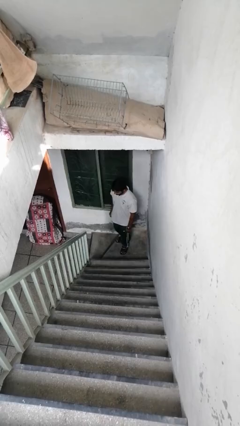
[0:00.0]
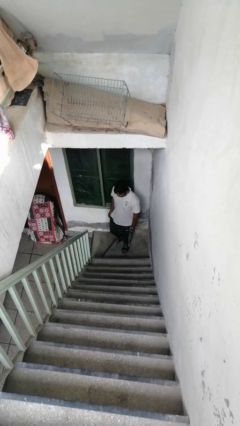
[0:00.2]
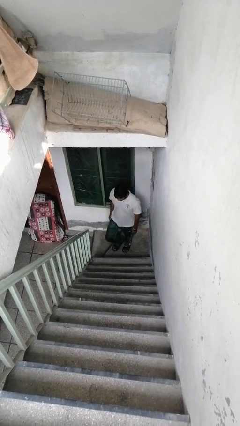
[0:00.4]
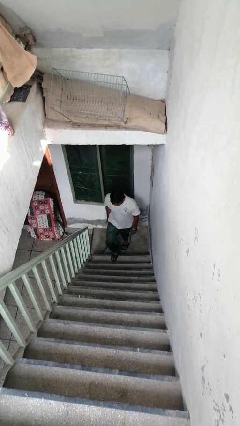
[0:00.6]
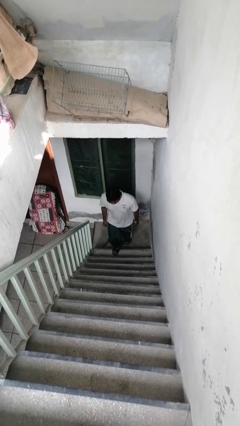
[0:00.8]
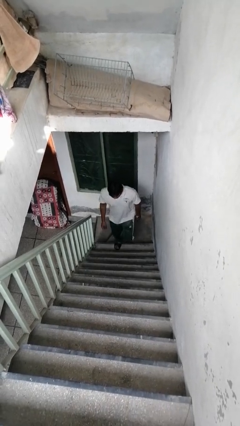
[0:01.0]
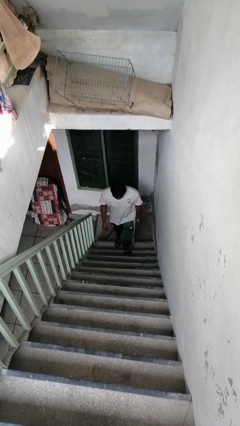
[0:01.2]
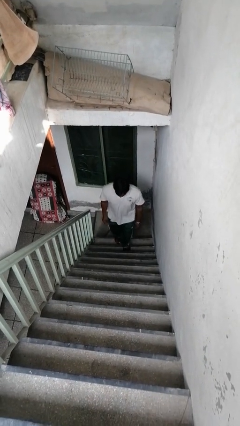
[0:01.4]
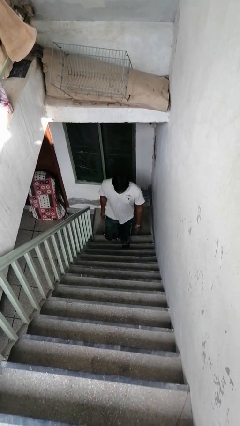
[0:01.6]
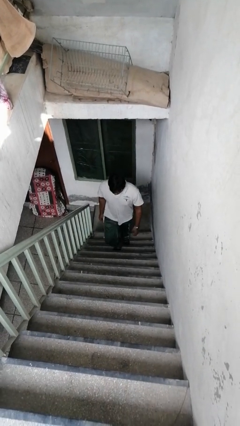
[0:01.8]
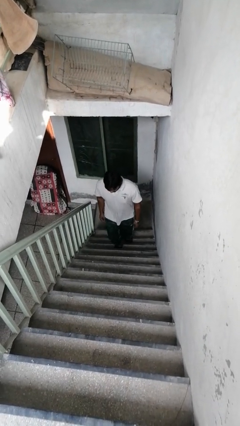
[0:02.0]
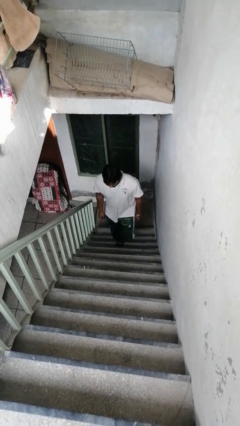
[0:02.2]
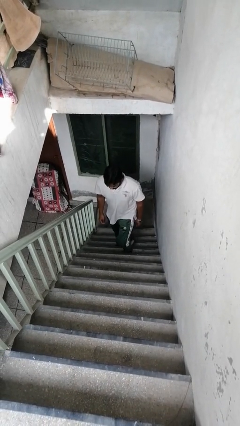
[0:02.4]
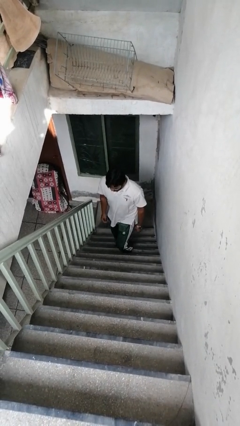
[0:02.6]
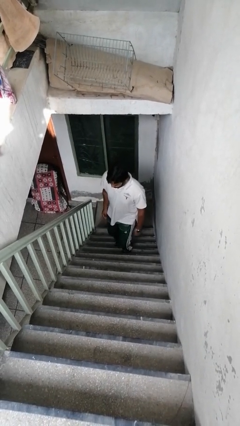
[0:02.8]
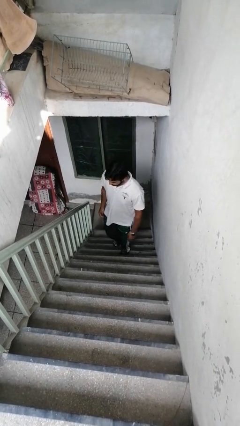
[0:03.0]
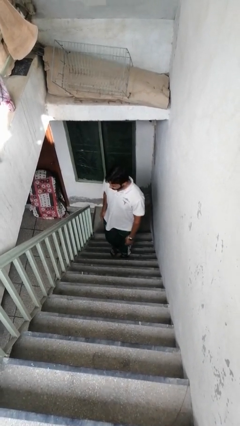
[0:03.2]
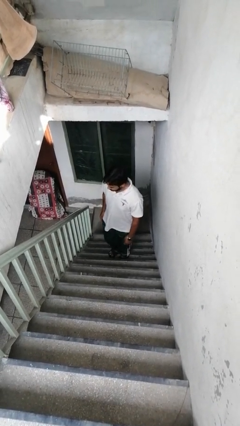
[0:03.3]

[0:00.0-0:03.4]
person climbs up stairs

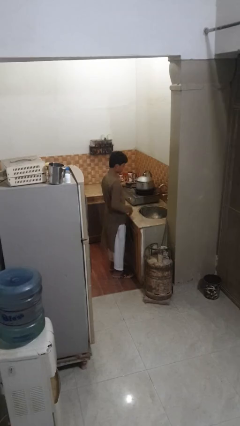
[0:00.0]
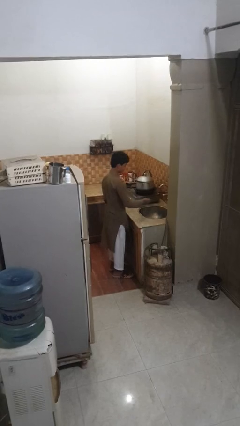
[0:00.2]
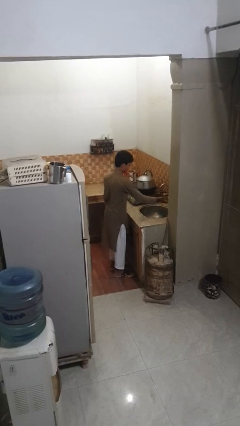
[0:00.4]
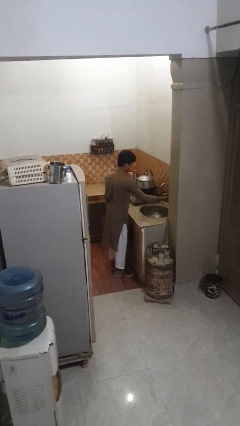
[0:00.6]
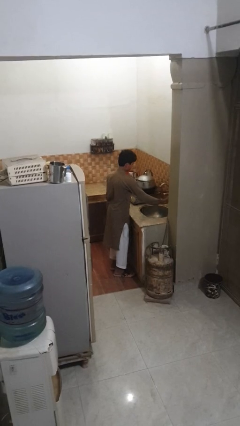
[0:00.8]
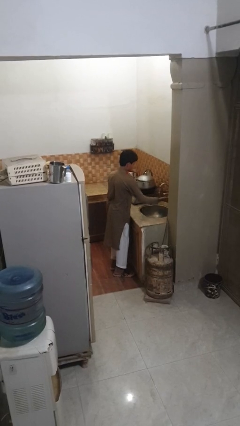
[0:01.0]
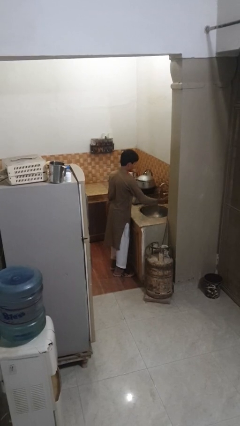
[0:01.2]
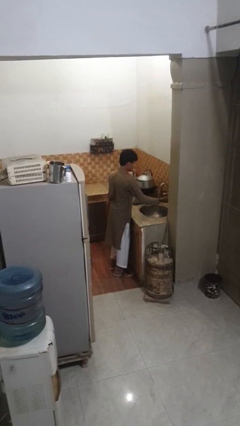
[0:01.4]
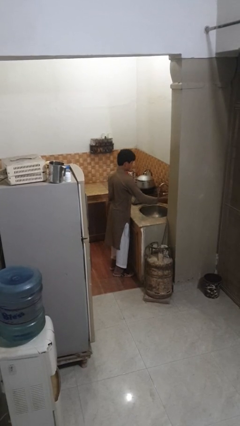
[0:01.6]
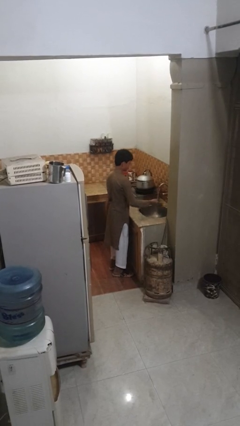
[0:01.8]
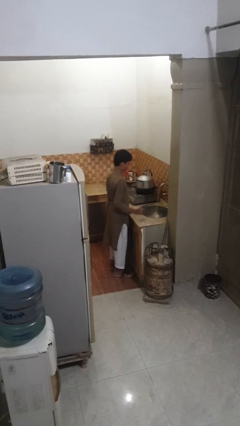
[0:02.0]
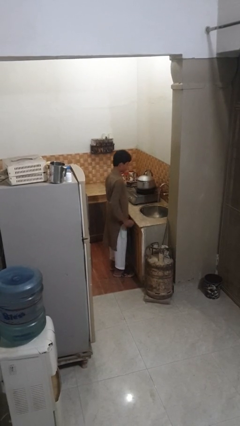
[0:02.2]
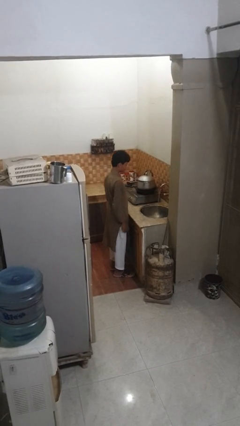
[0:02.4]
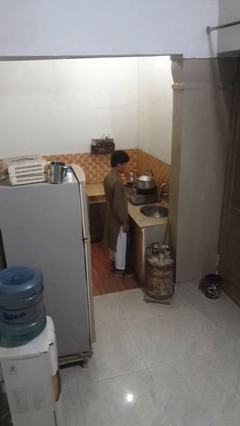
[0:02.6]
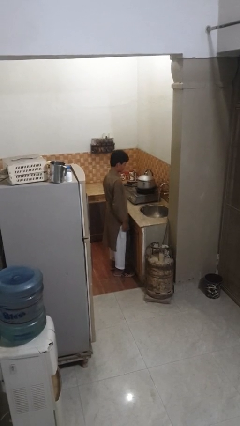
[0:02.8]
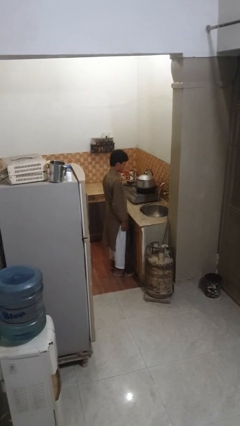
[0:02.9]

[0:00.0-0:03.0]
person turns on faucet

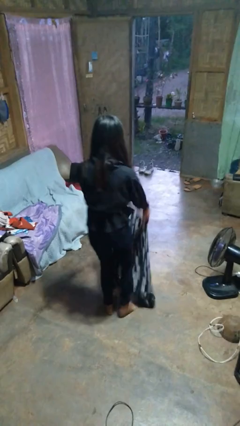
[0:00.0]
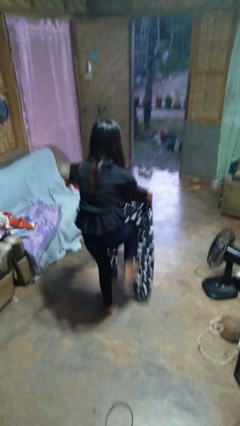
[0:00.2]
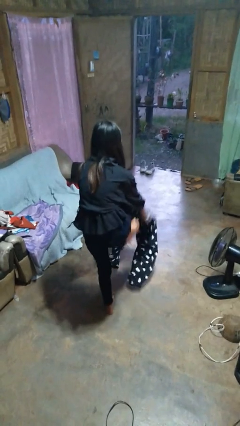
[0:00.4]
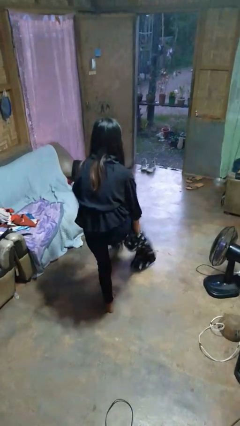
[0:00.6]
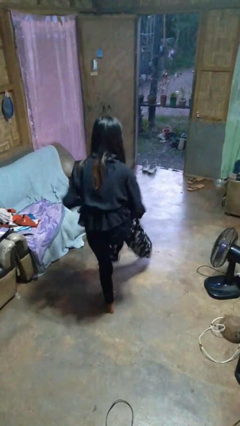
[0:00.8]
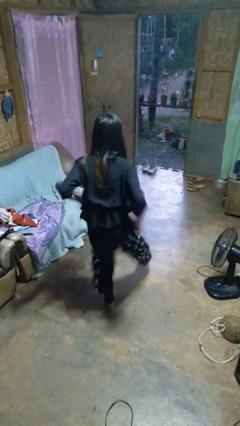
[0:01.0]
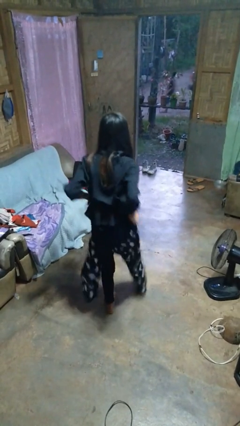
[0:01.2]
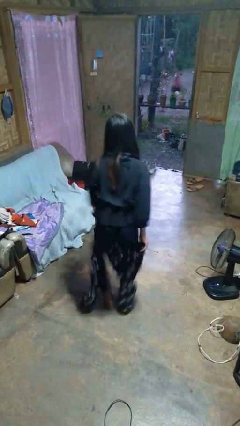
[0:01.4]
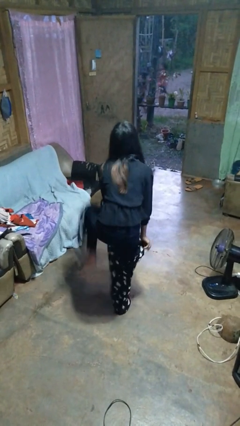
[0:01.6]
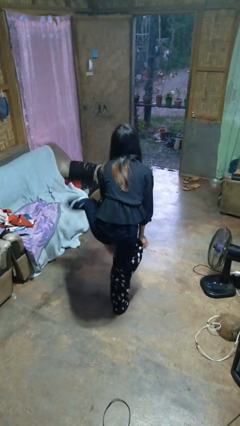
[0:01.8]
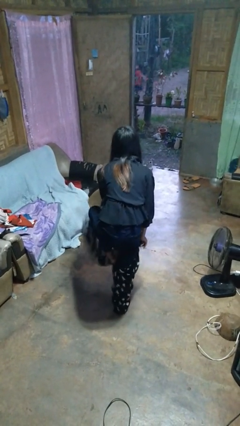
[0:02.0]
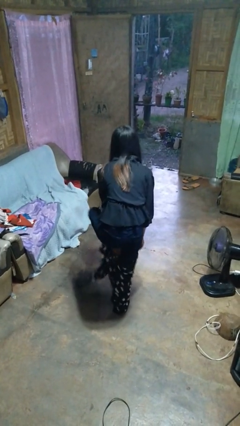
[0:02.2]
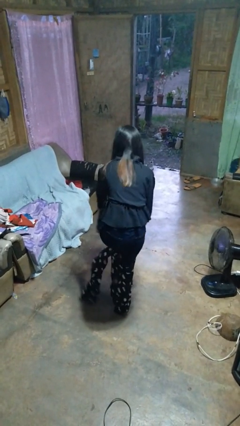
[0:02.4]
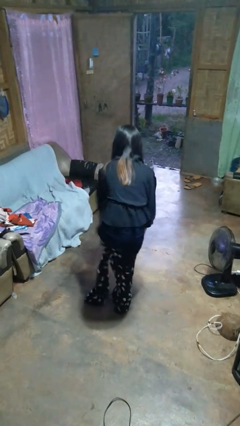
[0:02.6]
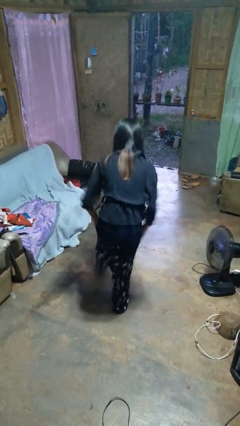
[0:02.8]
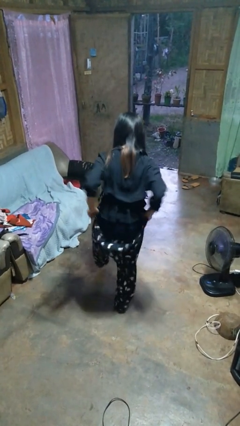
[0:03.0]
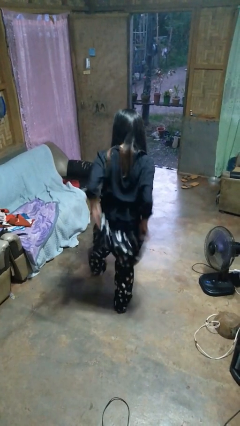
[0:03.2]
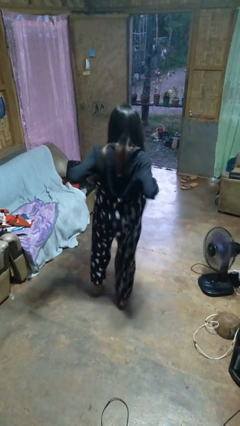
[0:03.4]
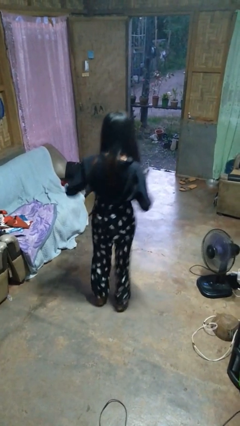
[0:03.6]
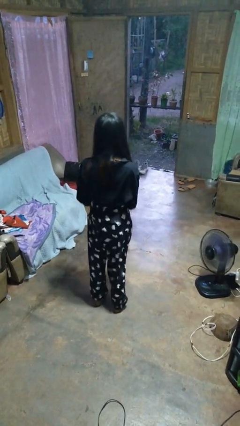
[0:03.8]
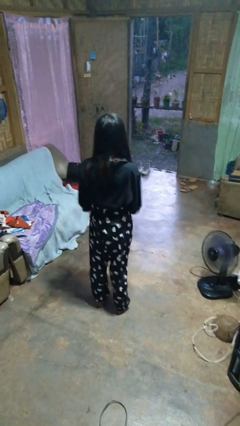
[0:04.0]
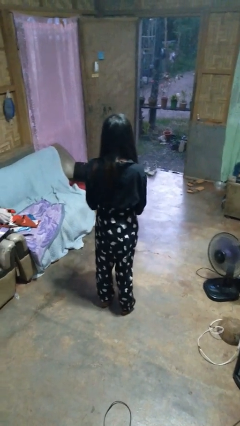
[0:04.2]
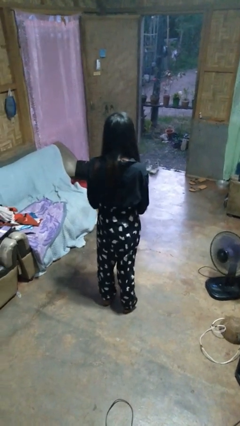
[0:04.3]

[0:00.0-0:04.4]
person puts on pants

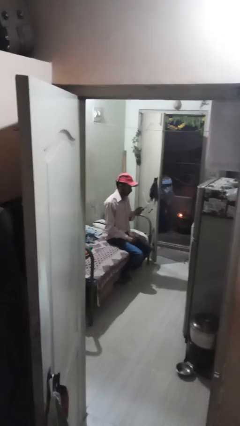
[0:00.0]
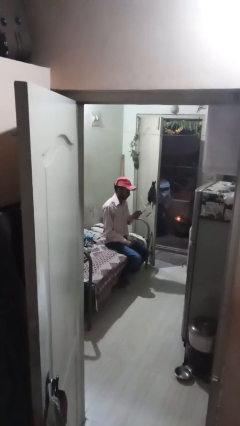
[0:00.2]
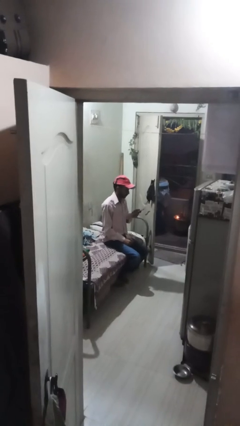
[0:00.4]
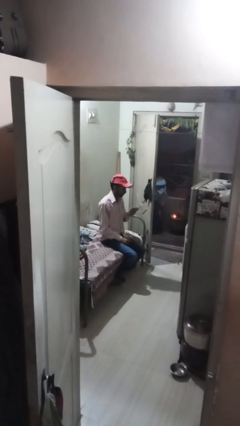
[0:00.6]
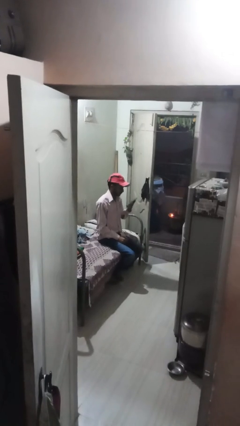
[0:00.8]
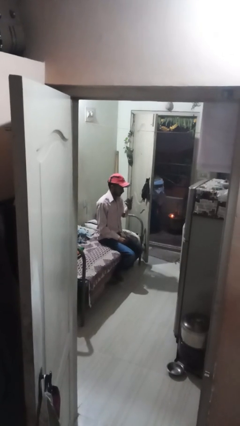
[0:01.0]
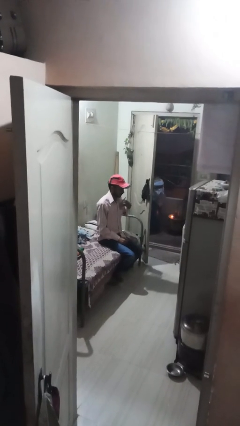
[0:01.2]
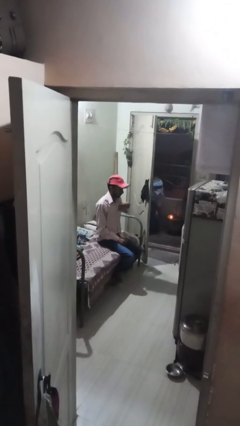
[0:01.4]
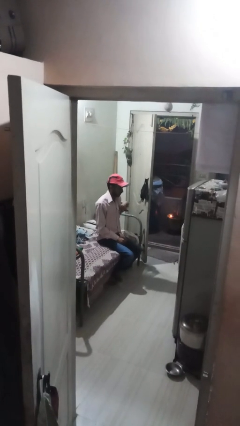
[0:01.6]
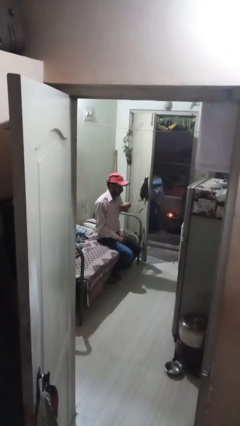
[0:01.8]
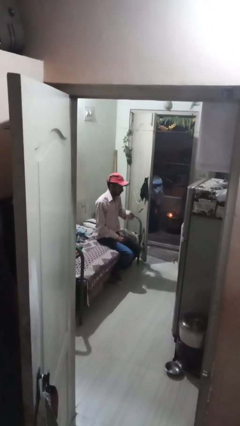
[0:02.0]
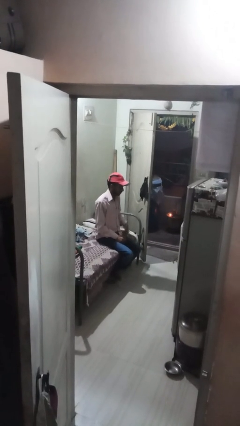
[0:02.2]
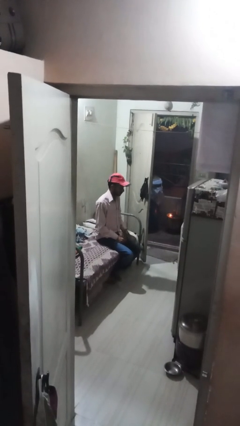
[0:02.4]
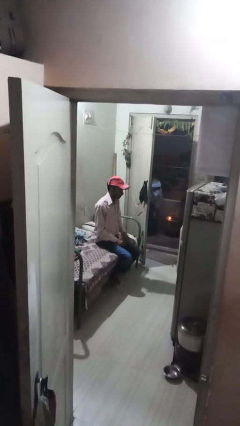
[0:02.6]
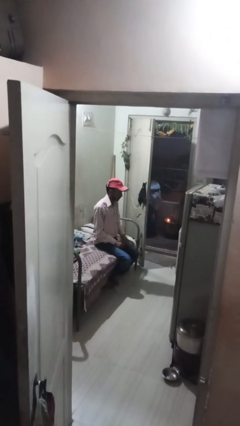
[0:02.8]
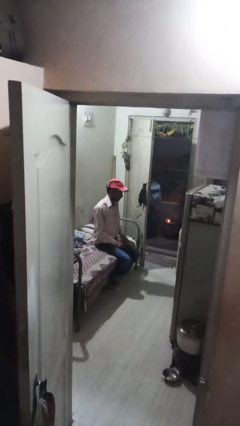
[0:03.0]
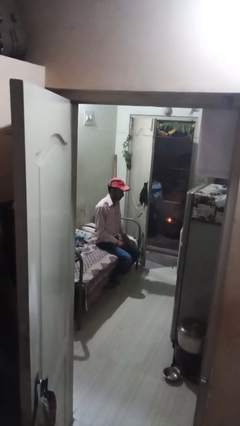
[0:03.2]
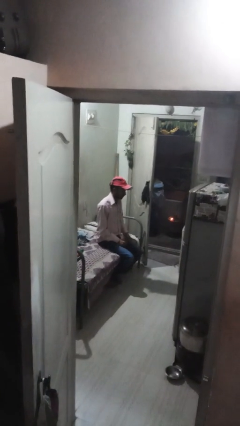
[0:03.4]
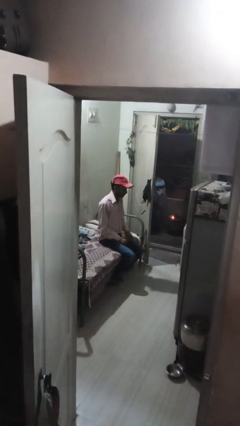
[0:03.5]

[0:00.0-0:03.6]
person puts phone into pocket

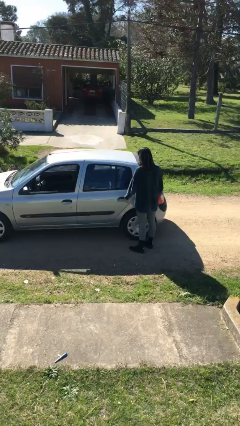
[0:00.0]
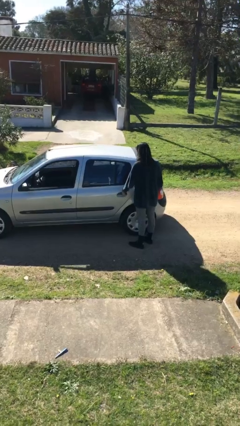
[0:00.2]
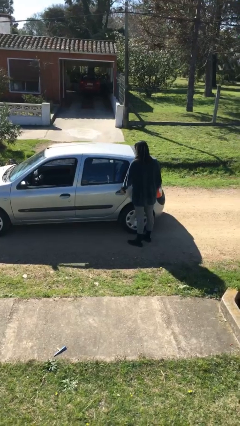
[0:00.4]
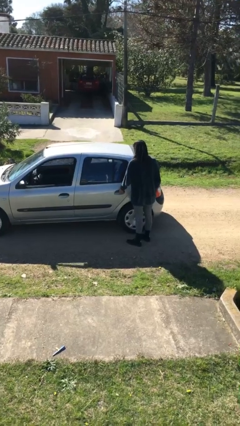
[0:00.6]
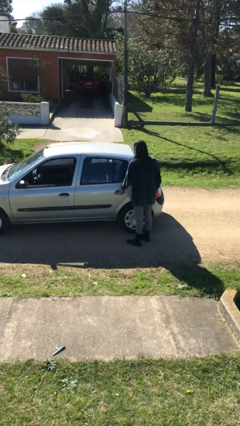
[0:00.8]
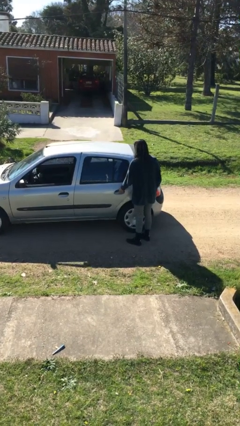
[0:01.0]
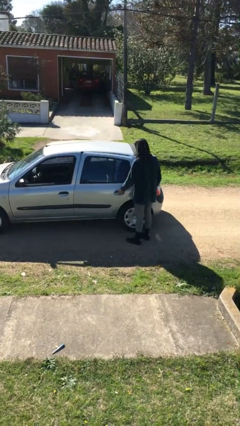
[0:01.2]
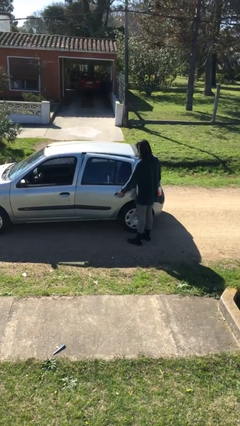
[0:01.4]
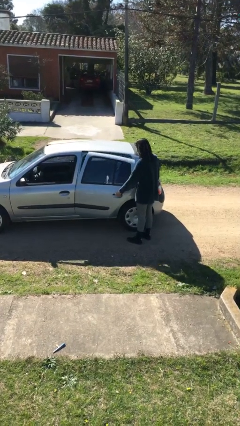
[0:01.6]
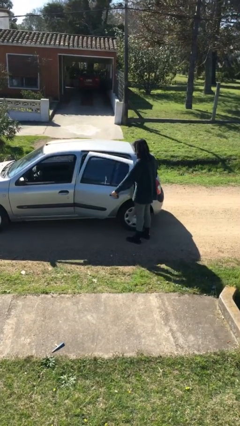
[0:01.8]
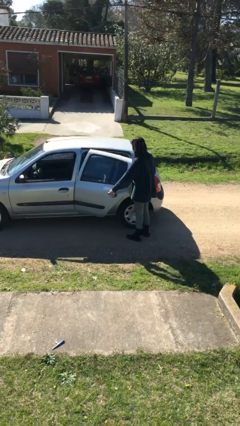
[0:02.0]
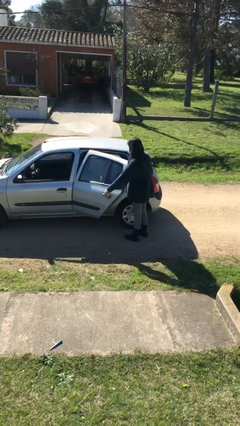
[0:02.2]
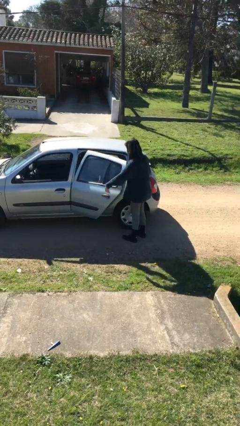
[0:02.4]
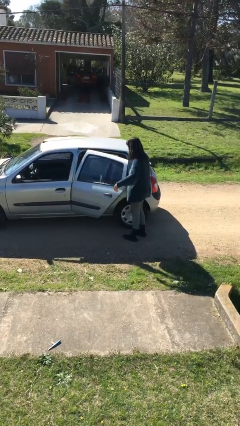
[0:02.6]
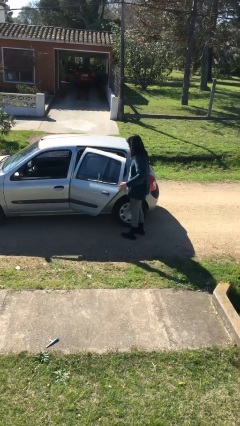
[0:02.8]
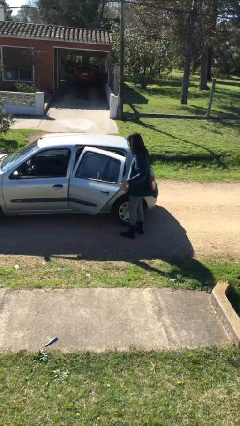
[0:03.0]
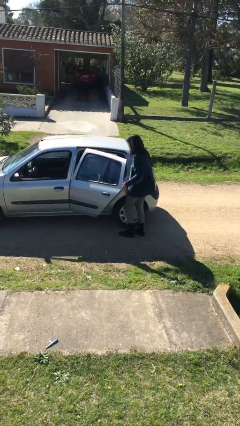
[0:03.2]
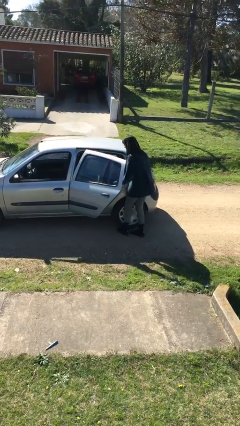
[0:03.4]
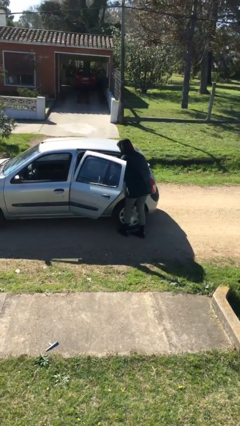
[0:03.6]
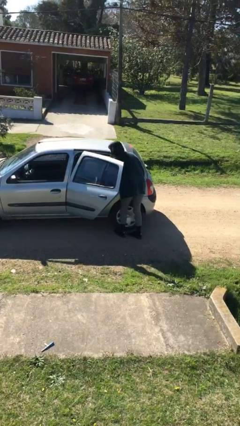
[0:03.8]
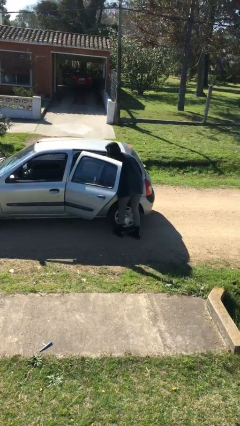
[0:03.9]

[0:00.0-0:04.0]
person opens car door
